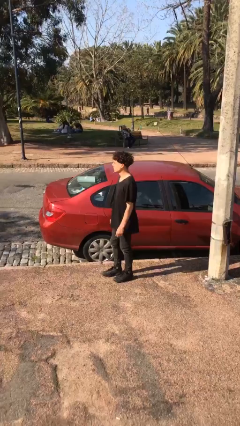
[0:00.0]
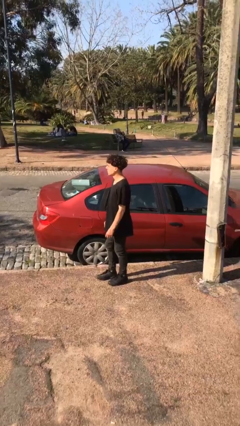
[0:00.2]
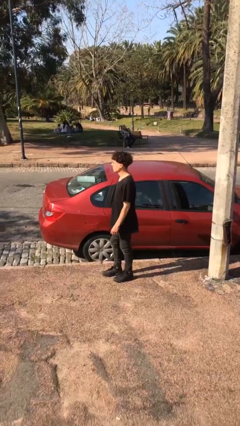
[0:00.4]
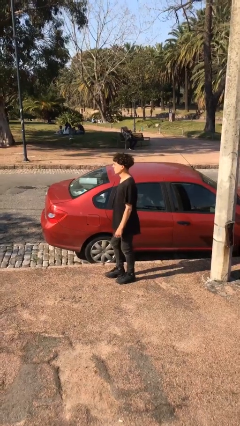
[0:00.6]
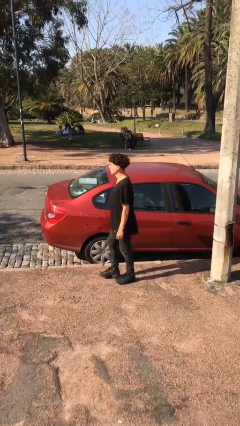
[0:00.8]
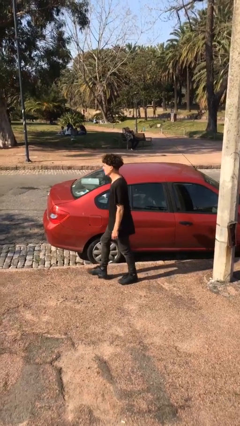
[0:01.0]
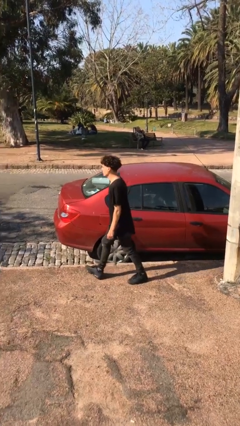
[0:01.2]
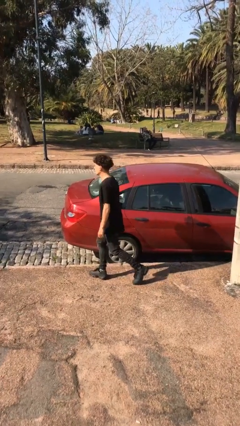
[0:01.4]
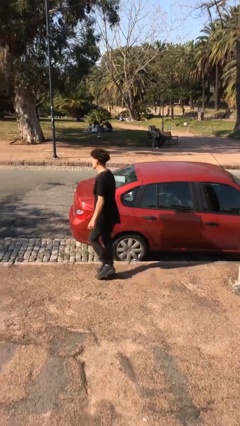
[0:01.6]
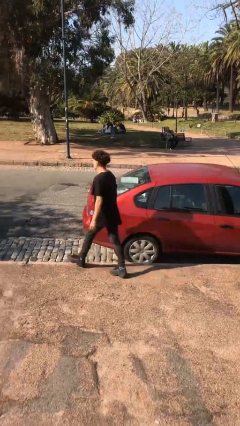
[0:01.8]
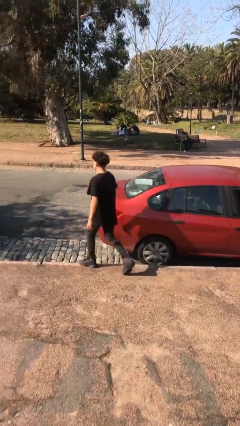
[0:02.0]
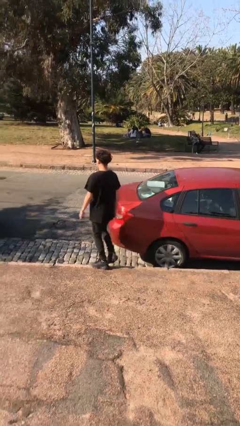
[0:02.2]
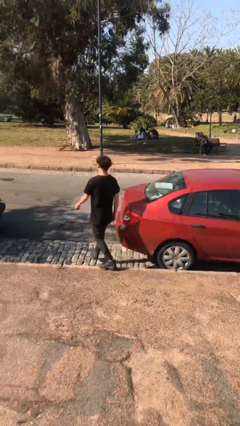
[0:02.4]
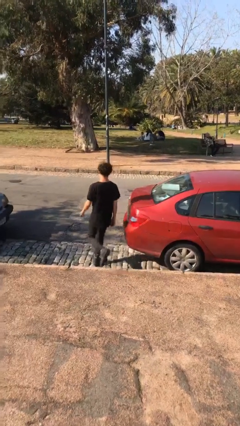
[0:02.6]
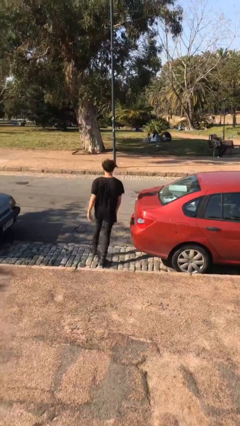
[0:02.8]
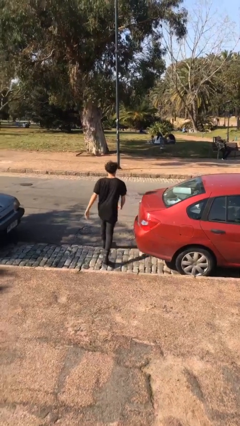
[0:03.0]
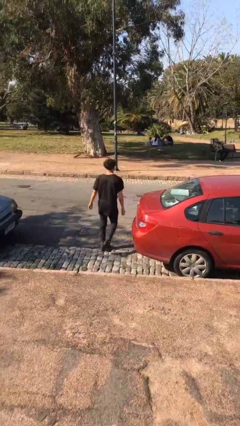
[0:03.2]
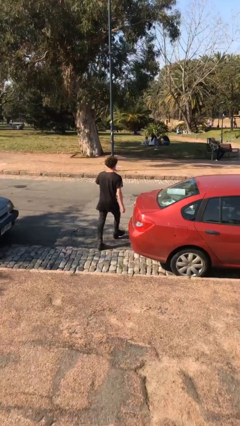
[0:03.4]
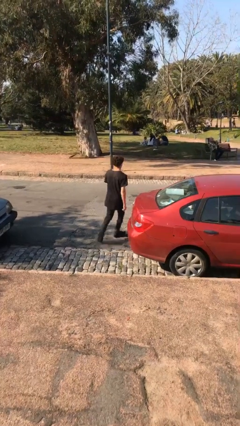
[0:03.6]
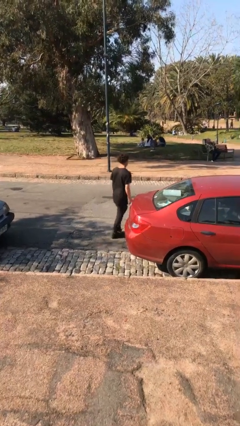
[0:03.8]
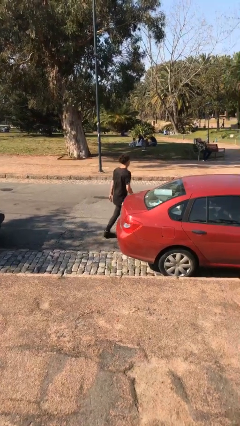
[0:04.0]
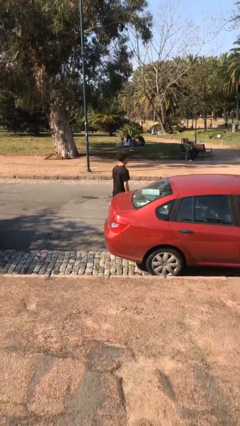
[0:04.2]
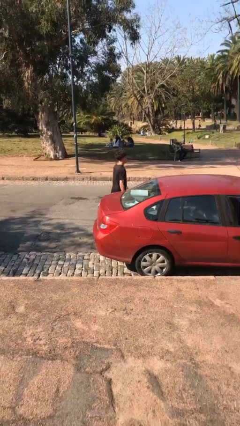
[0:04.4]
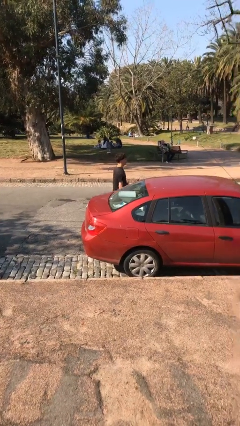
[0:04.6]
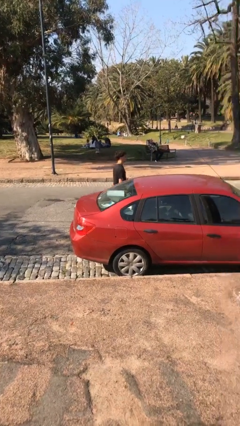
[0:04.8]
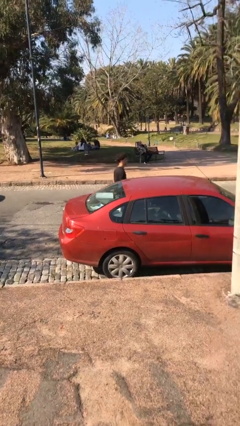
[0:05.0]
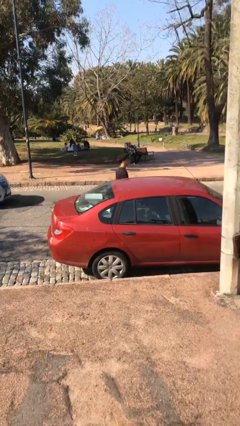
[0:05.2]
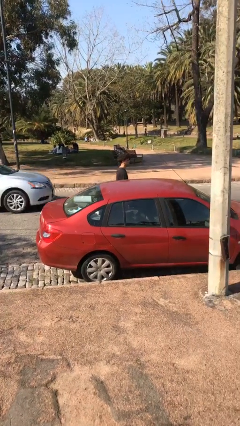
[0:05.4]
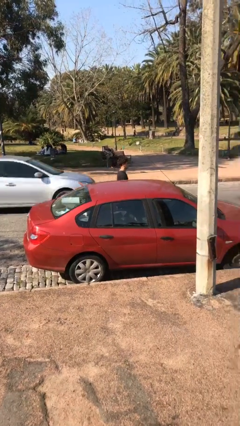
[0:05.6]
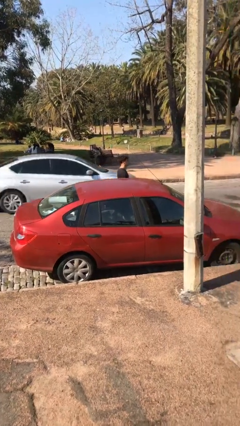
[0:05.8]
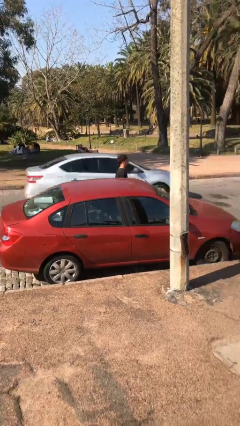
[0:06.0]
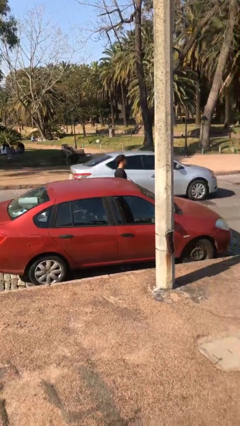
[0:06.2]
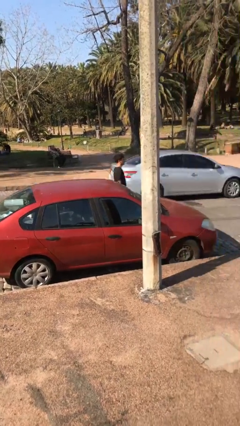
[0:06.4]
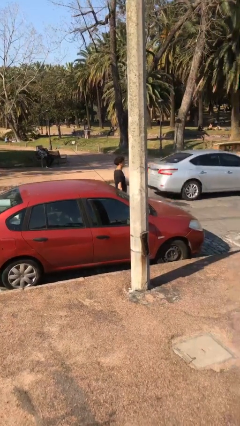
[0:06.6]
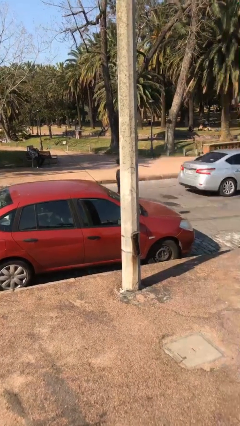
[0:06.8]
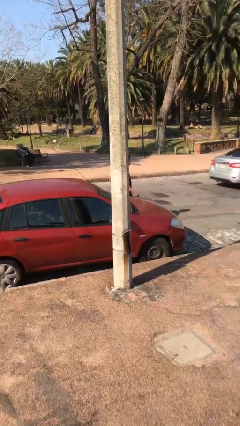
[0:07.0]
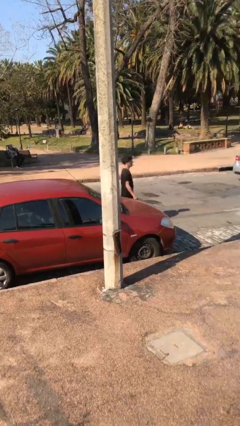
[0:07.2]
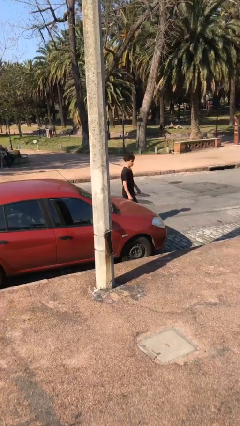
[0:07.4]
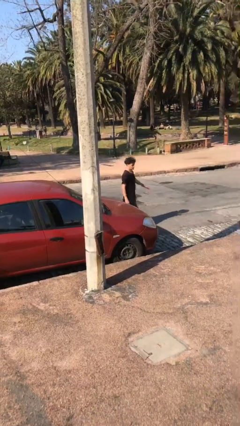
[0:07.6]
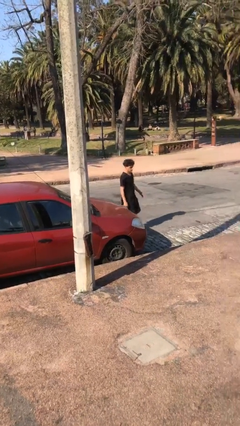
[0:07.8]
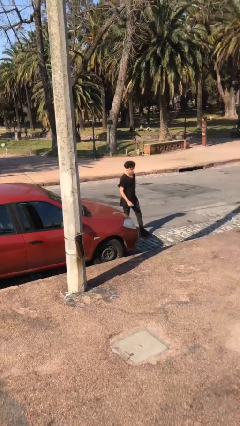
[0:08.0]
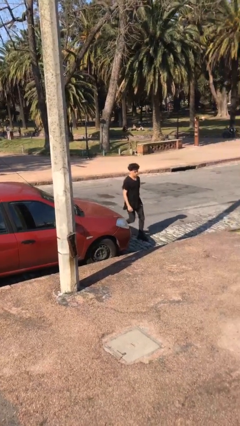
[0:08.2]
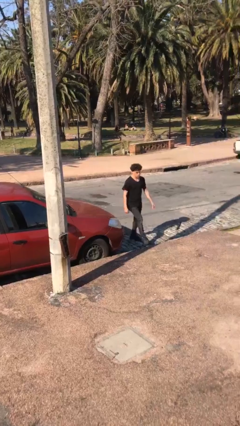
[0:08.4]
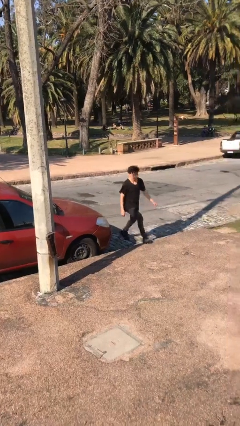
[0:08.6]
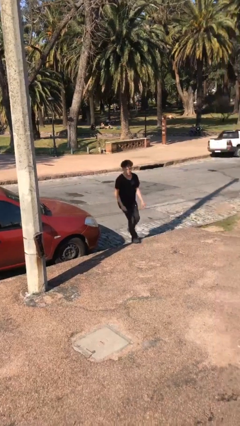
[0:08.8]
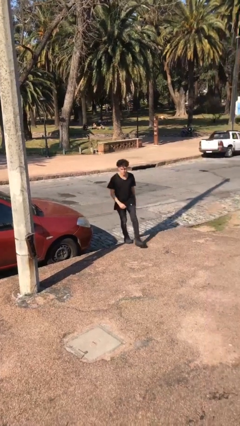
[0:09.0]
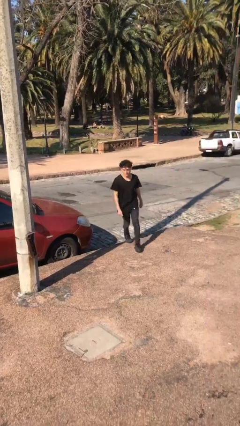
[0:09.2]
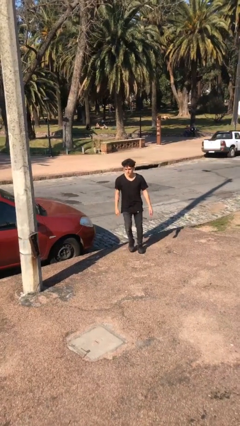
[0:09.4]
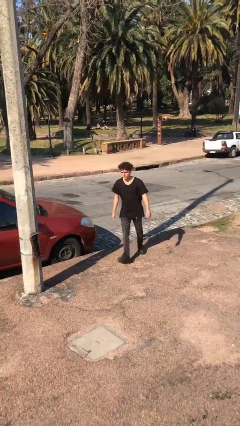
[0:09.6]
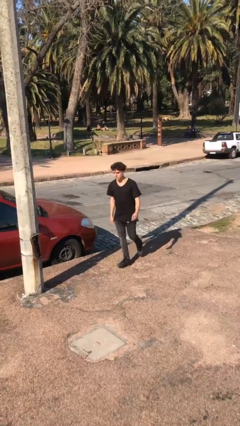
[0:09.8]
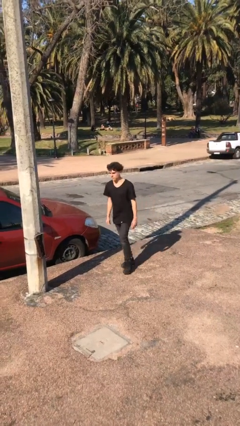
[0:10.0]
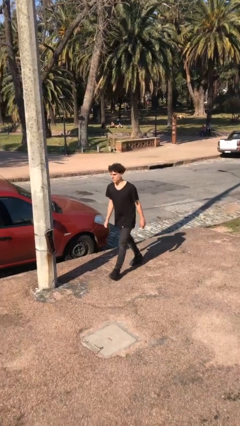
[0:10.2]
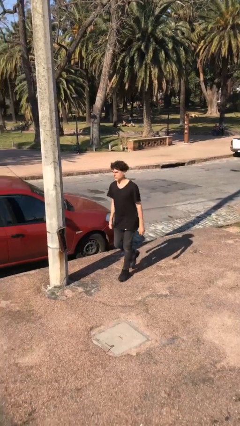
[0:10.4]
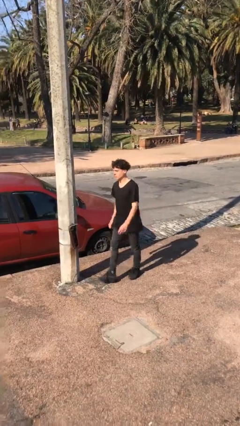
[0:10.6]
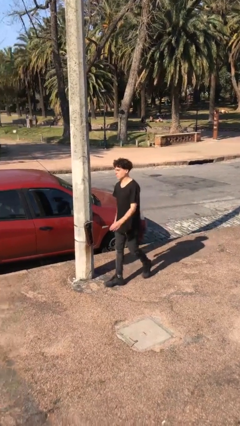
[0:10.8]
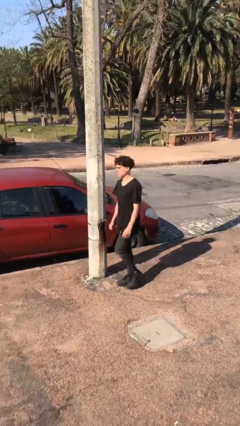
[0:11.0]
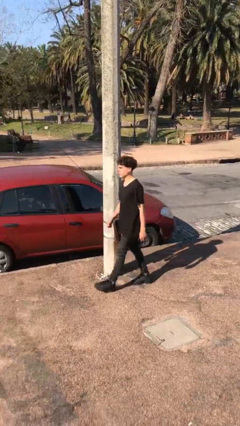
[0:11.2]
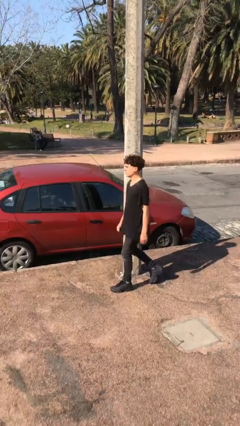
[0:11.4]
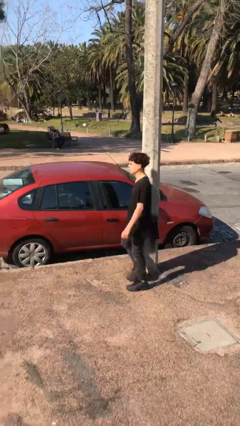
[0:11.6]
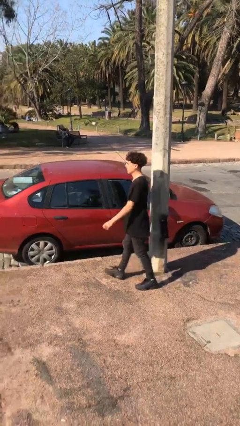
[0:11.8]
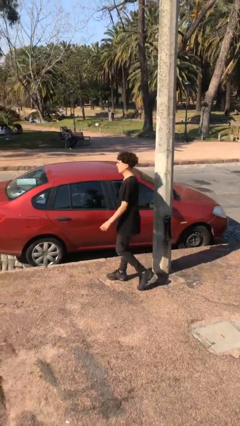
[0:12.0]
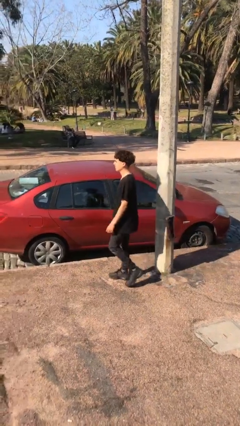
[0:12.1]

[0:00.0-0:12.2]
person walks around car

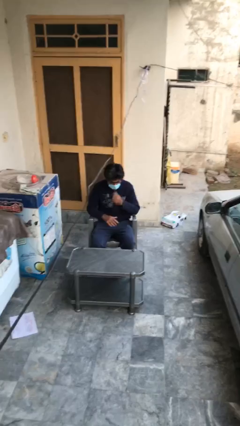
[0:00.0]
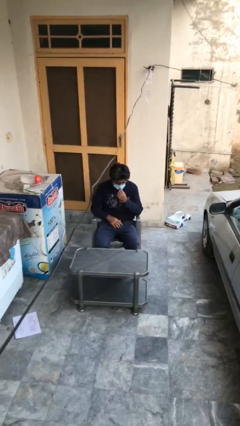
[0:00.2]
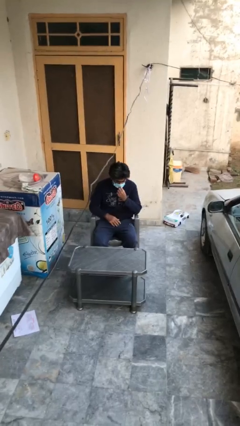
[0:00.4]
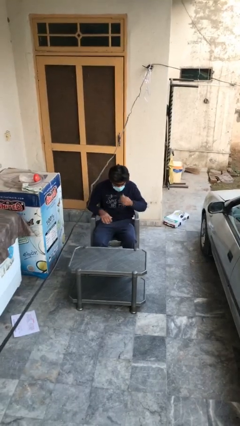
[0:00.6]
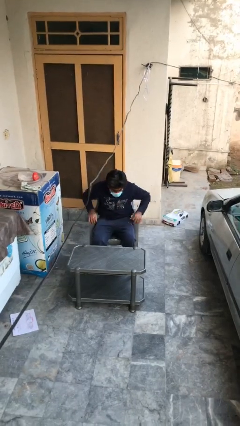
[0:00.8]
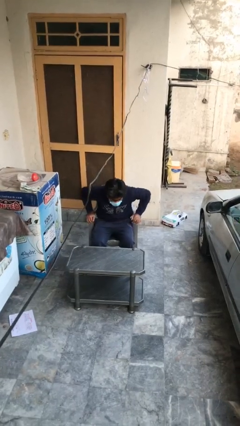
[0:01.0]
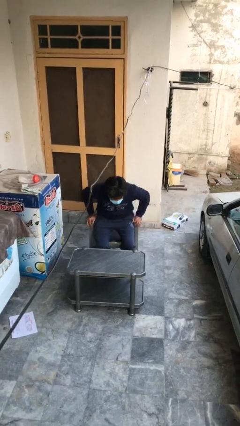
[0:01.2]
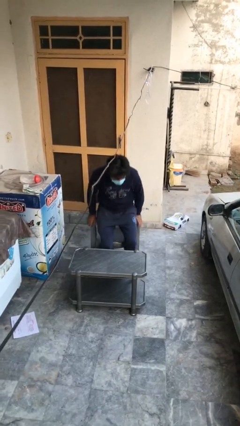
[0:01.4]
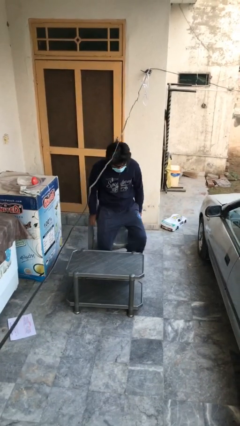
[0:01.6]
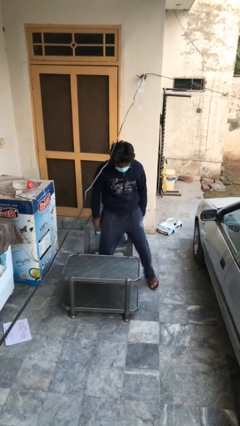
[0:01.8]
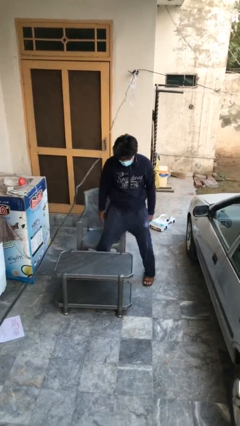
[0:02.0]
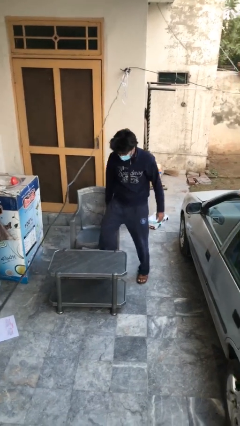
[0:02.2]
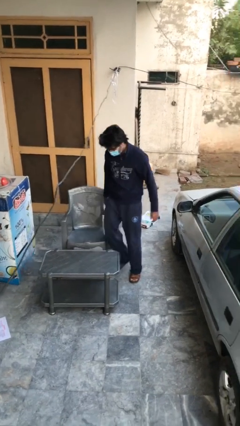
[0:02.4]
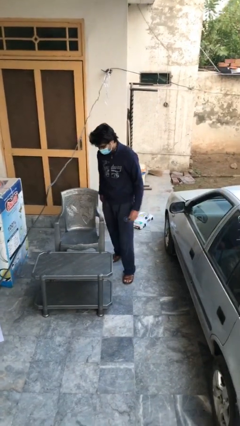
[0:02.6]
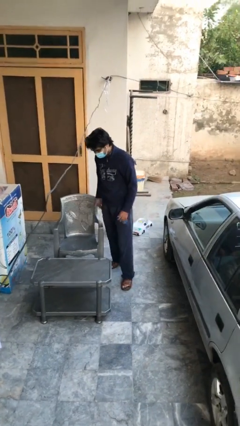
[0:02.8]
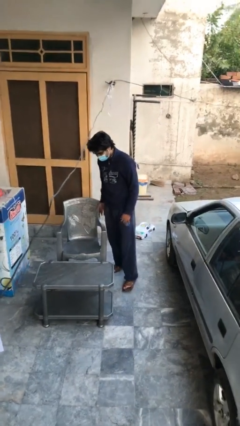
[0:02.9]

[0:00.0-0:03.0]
person stands up

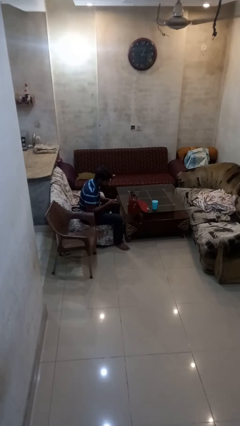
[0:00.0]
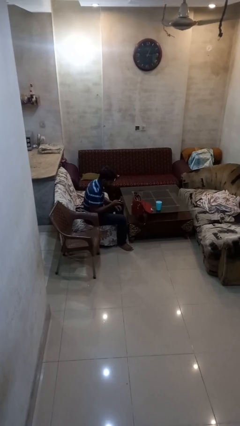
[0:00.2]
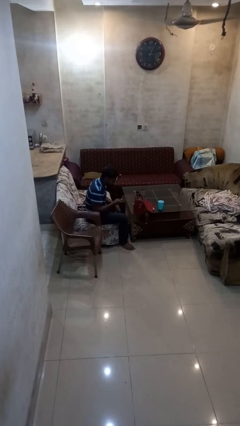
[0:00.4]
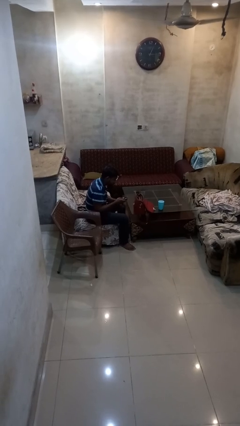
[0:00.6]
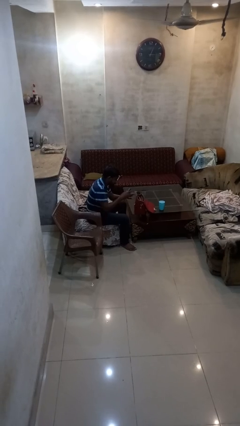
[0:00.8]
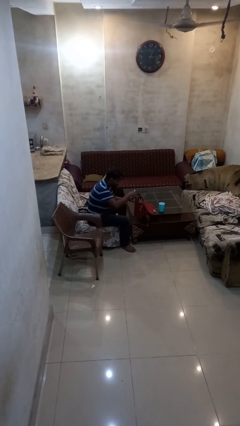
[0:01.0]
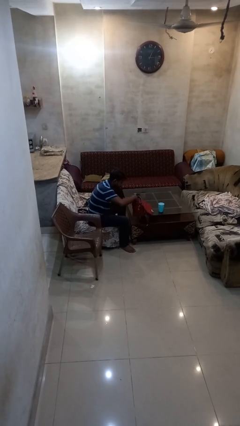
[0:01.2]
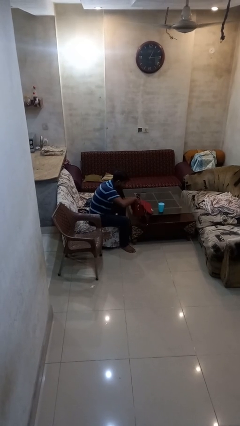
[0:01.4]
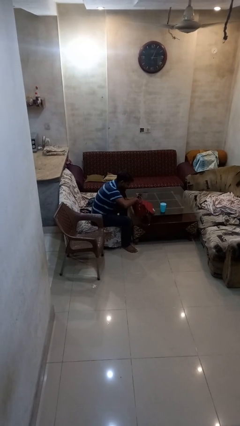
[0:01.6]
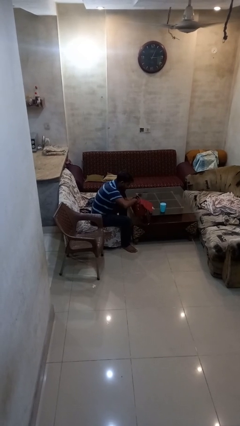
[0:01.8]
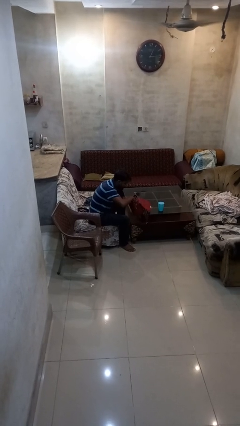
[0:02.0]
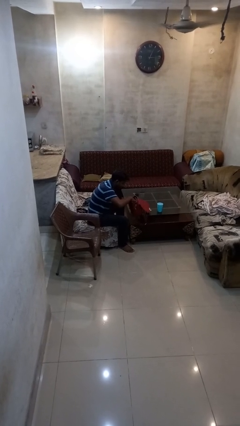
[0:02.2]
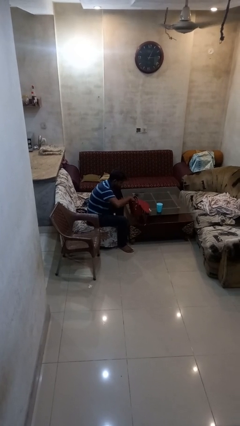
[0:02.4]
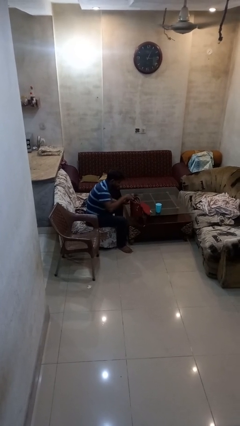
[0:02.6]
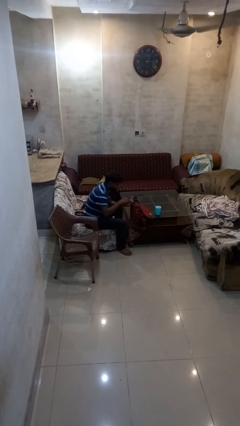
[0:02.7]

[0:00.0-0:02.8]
person puts object into purse
